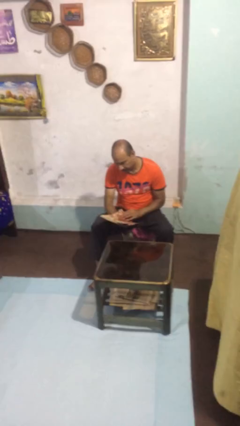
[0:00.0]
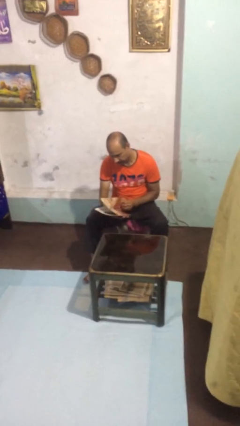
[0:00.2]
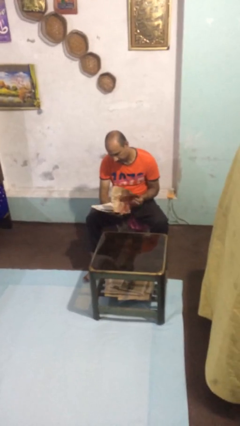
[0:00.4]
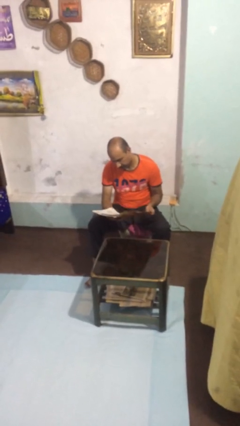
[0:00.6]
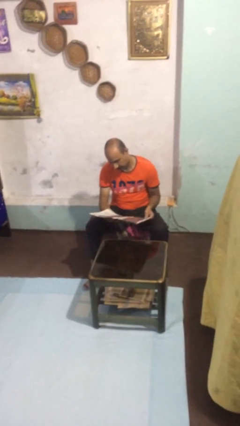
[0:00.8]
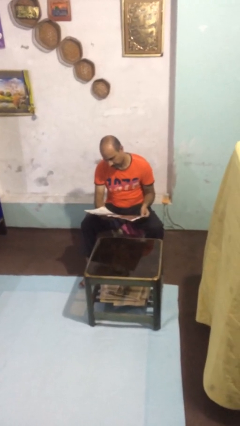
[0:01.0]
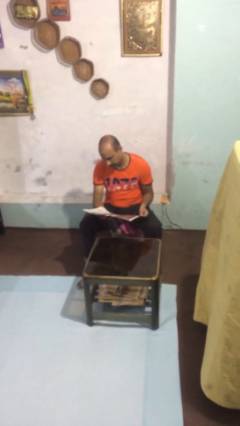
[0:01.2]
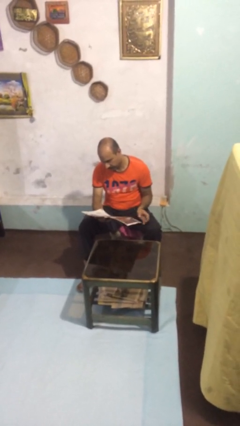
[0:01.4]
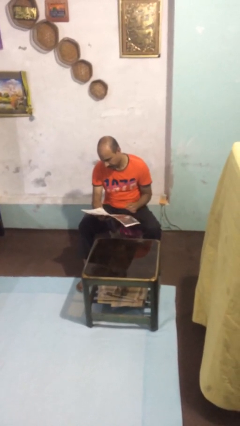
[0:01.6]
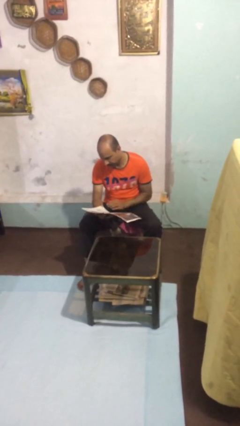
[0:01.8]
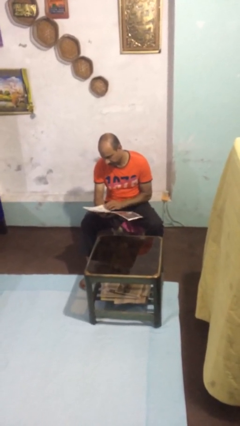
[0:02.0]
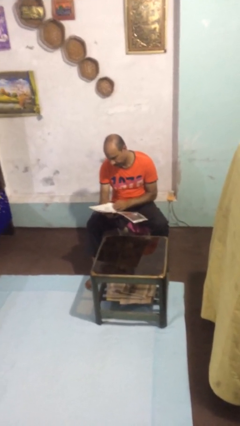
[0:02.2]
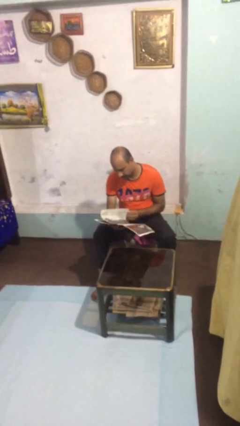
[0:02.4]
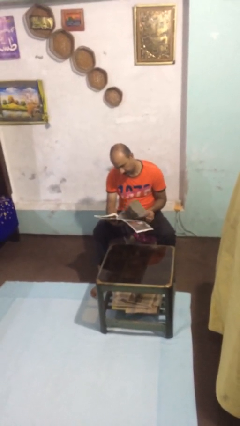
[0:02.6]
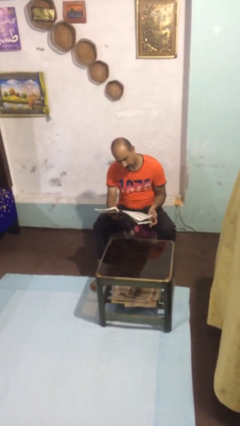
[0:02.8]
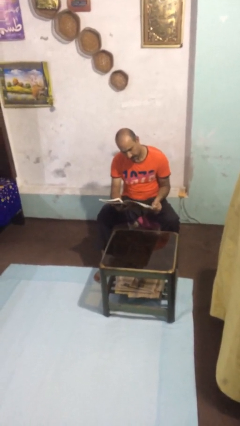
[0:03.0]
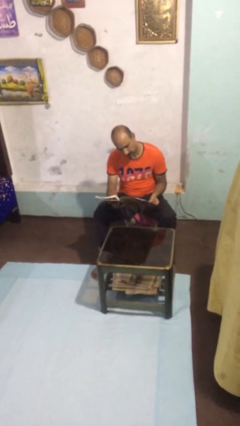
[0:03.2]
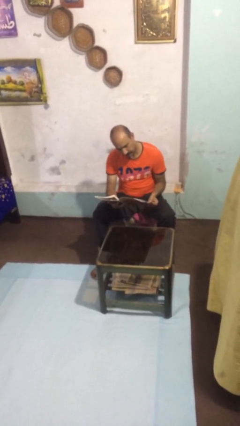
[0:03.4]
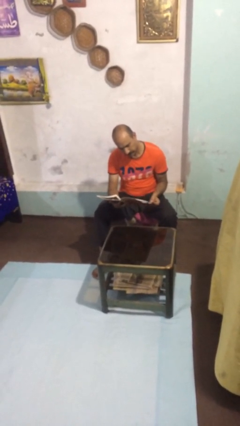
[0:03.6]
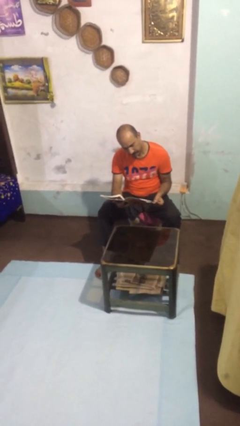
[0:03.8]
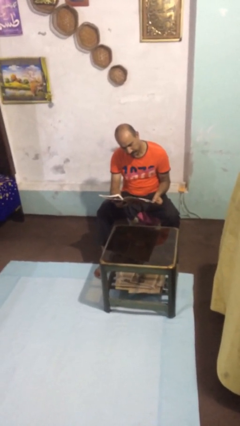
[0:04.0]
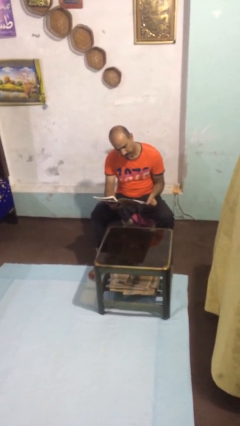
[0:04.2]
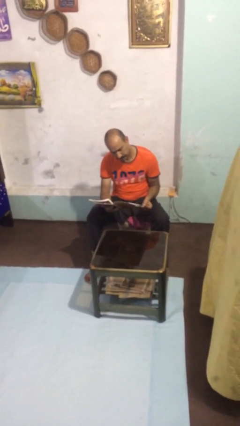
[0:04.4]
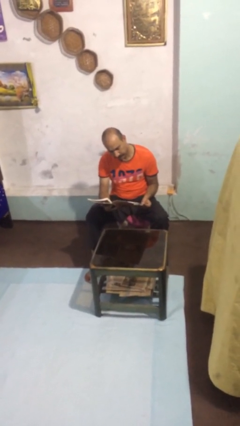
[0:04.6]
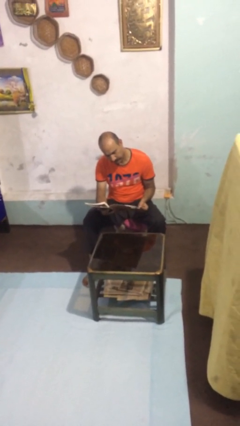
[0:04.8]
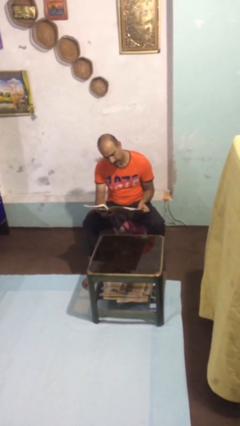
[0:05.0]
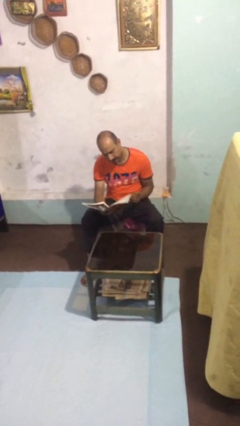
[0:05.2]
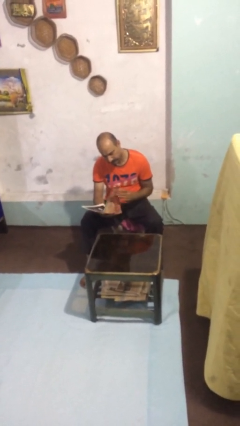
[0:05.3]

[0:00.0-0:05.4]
person reads document

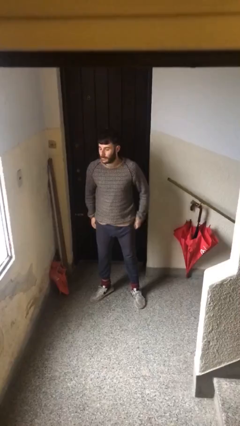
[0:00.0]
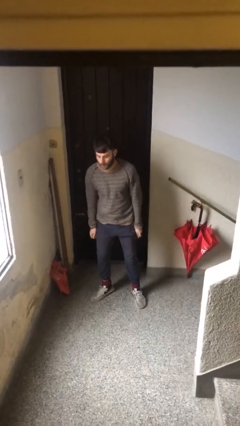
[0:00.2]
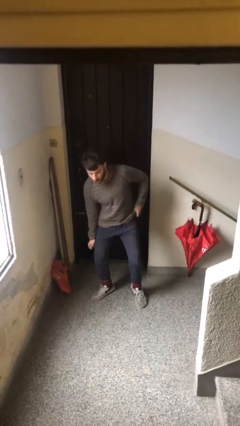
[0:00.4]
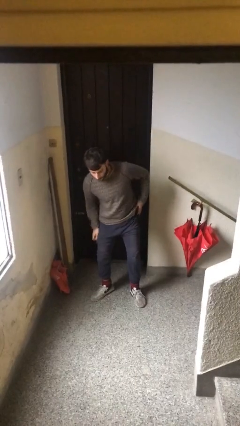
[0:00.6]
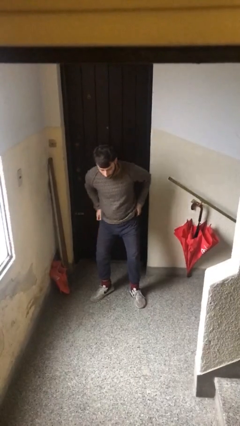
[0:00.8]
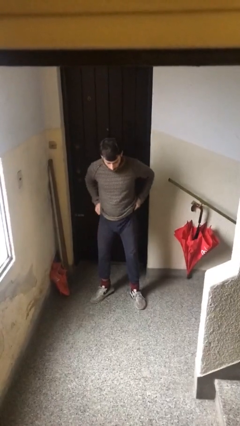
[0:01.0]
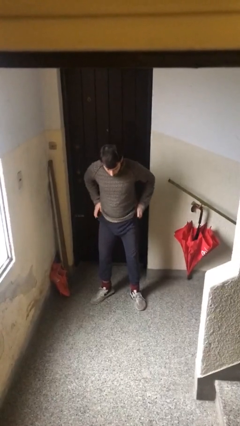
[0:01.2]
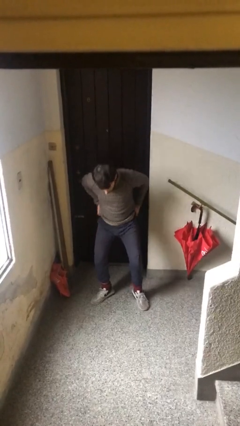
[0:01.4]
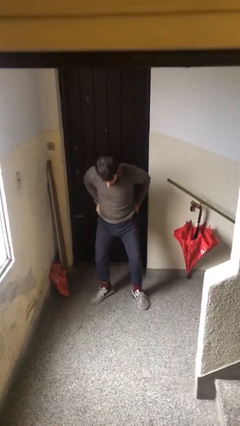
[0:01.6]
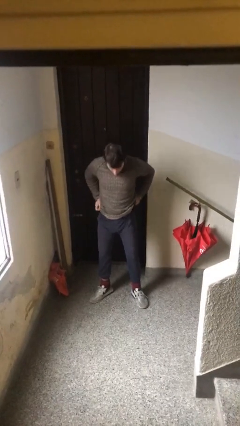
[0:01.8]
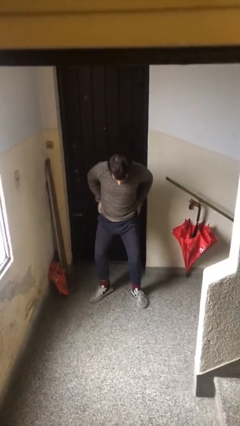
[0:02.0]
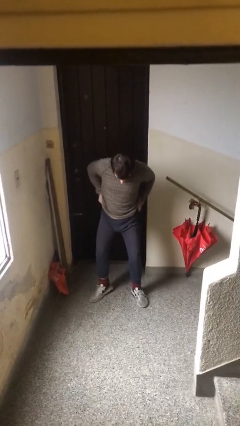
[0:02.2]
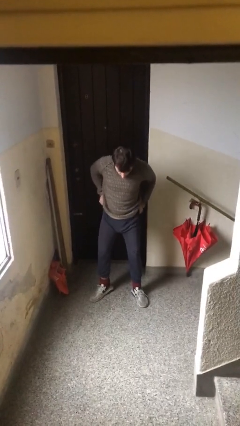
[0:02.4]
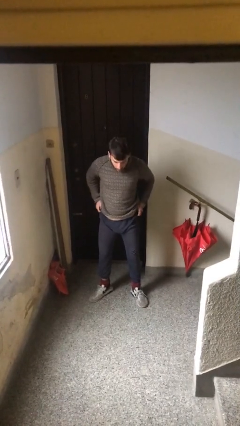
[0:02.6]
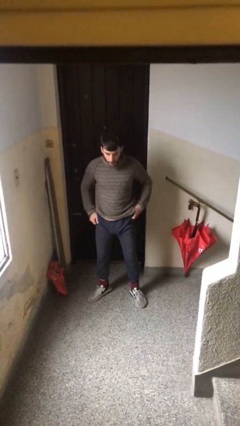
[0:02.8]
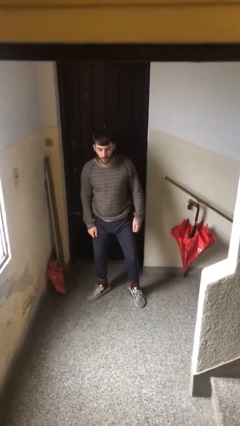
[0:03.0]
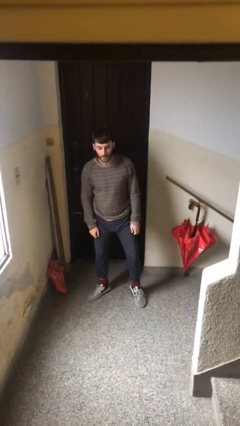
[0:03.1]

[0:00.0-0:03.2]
person hikes up pants

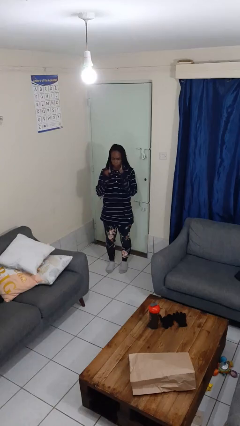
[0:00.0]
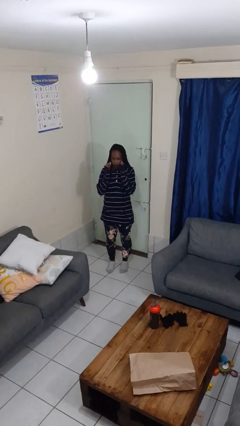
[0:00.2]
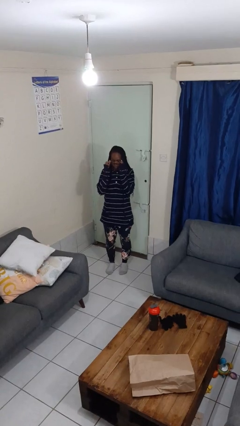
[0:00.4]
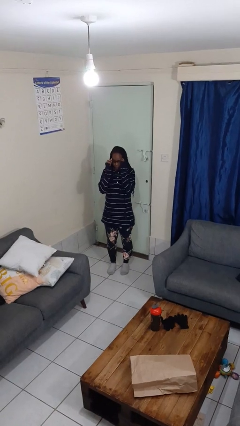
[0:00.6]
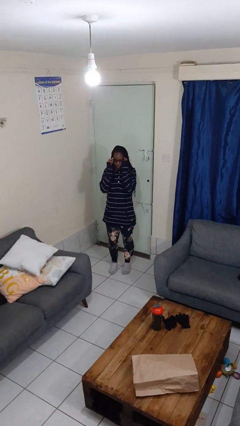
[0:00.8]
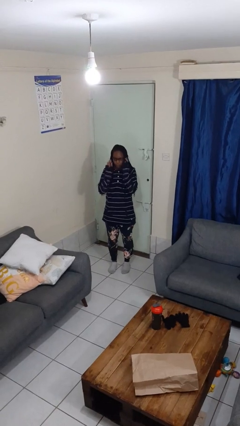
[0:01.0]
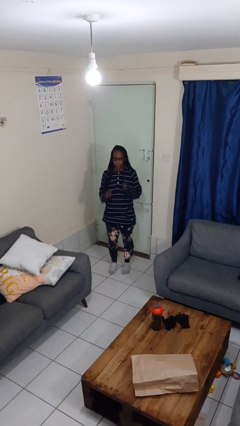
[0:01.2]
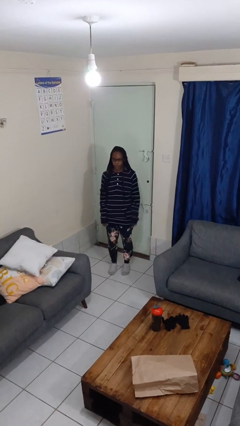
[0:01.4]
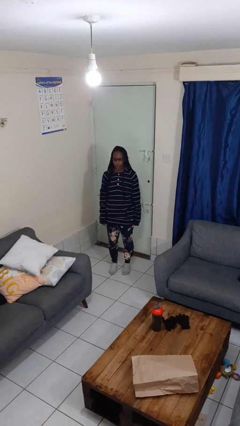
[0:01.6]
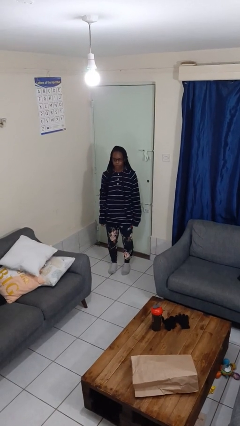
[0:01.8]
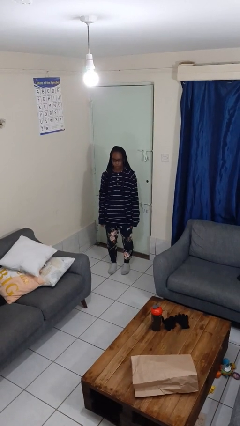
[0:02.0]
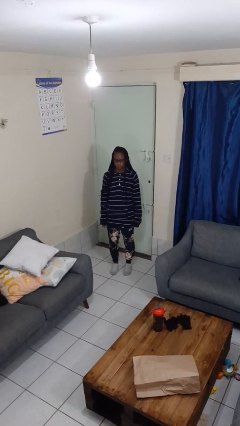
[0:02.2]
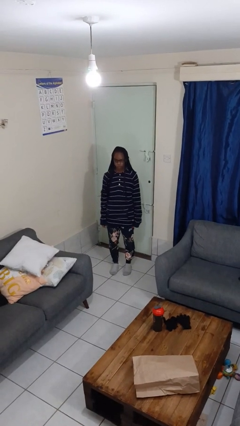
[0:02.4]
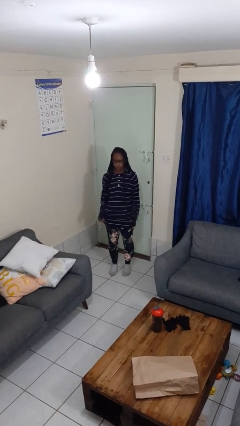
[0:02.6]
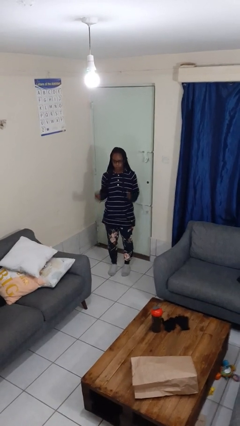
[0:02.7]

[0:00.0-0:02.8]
person puts on glasses

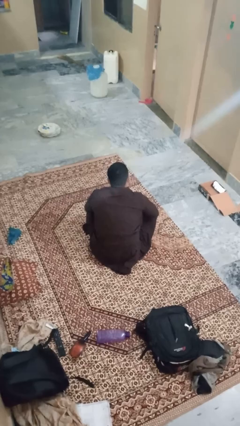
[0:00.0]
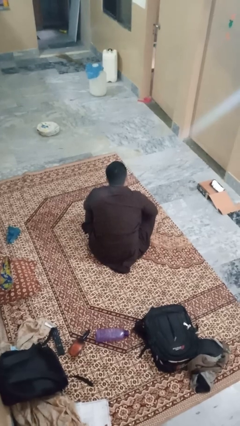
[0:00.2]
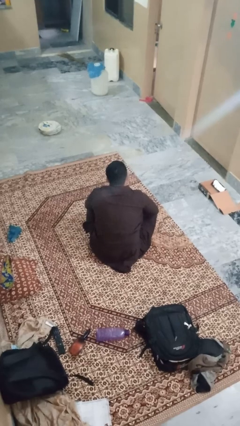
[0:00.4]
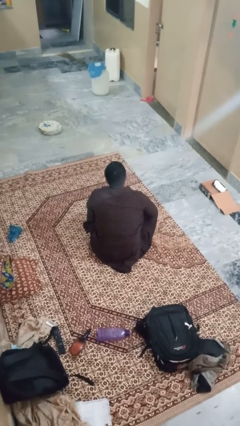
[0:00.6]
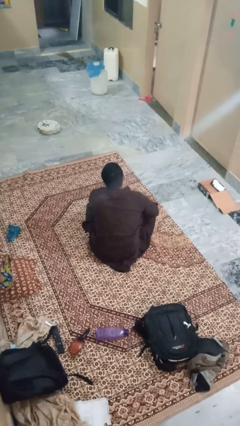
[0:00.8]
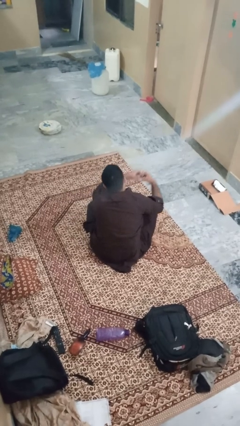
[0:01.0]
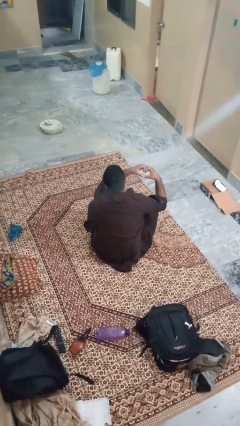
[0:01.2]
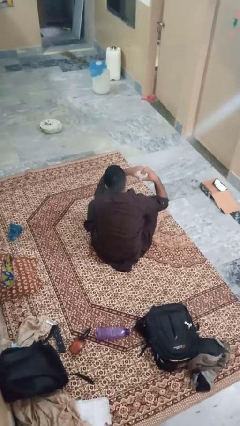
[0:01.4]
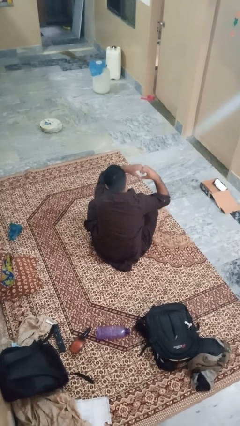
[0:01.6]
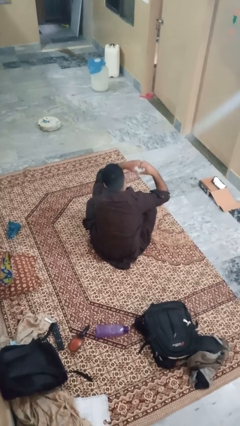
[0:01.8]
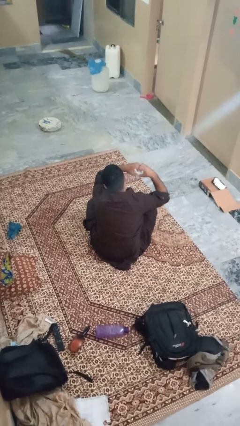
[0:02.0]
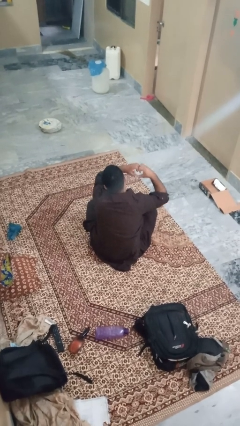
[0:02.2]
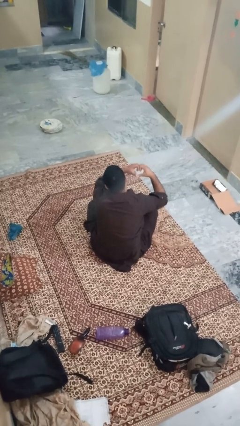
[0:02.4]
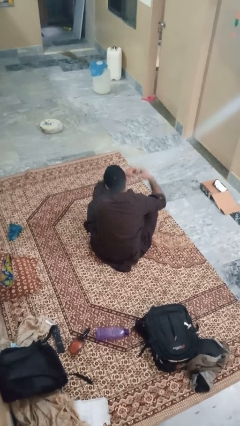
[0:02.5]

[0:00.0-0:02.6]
person gestures heart

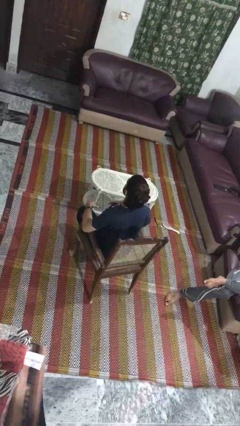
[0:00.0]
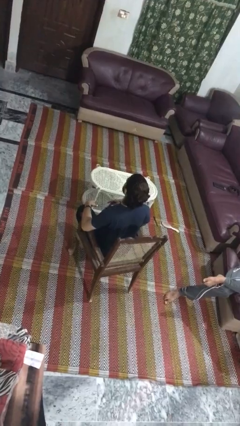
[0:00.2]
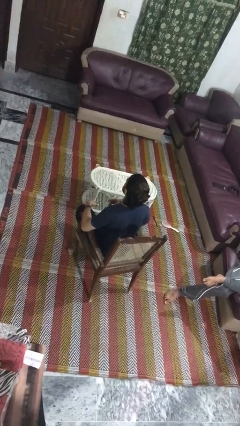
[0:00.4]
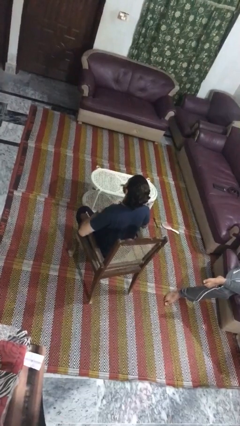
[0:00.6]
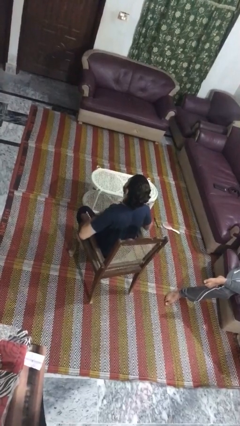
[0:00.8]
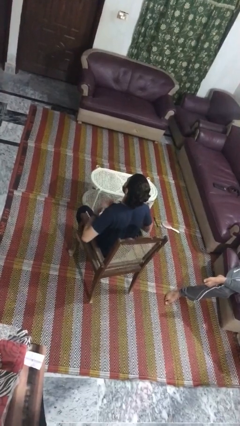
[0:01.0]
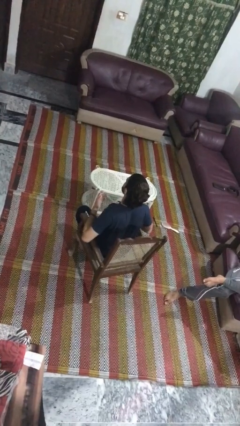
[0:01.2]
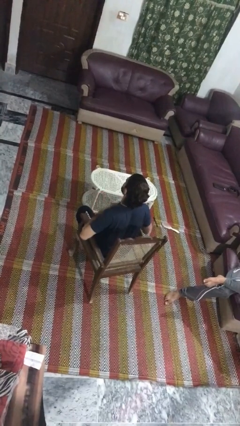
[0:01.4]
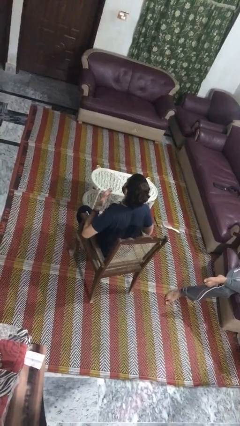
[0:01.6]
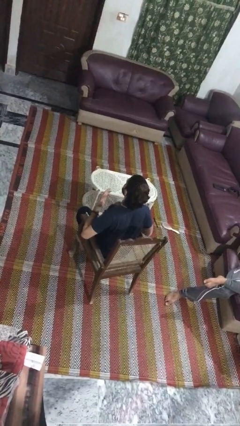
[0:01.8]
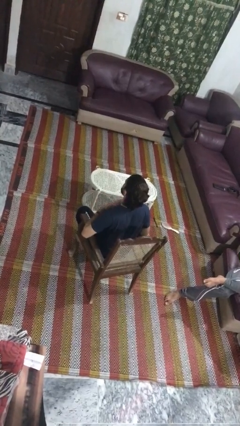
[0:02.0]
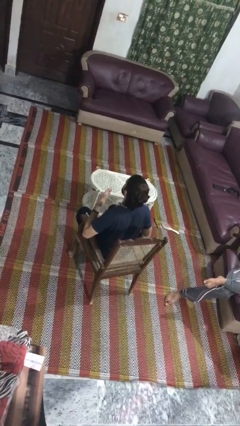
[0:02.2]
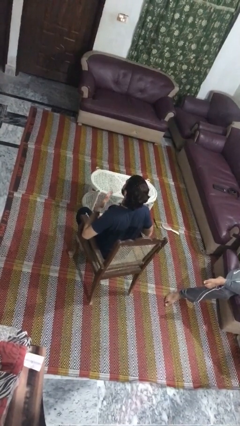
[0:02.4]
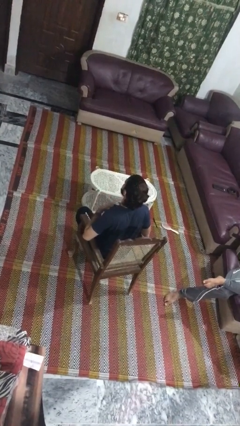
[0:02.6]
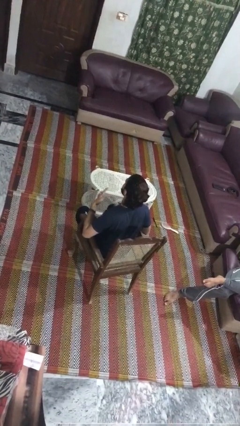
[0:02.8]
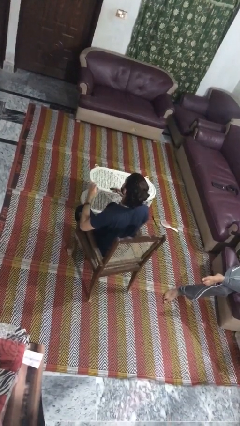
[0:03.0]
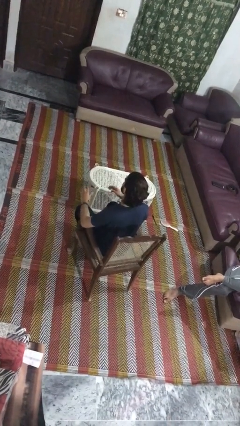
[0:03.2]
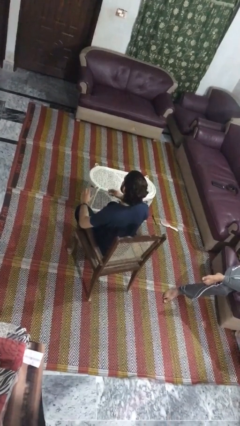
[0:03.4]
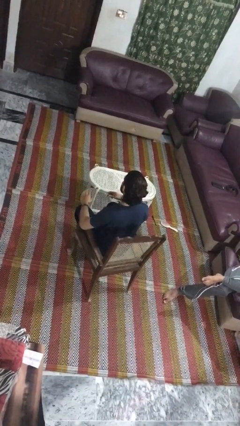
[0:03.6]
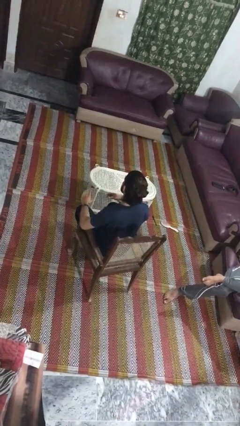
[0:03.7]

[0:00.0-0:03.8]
person drums on chest
